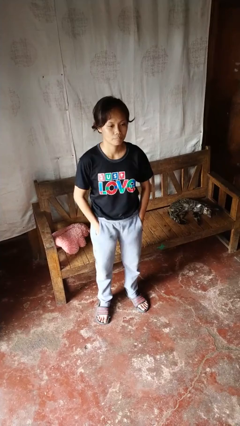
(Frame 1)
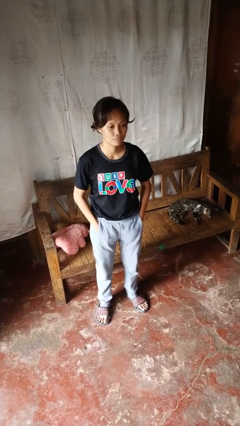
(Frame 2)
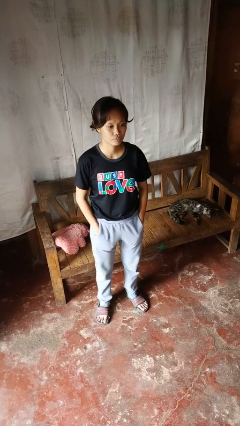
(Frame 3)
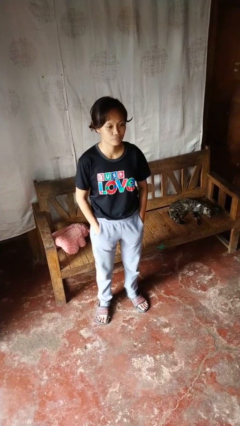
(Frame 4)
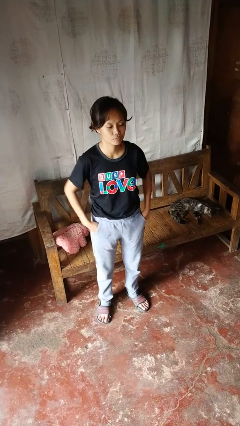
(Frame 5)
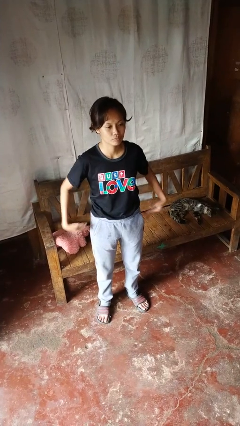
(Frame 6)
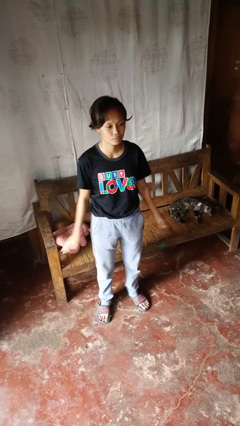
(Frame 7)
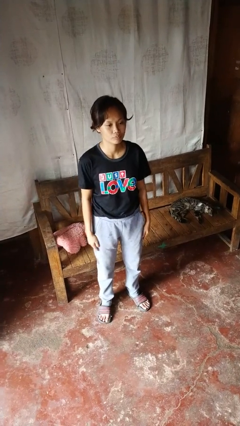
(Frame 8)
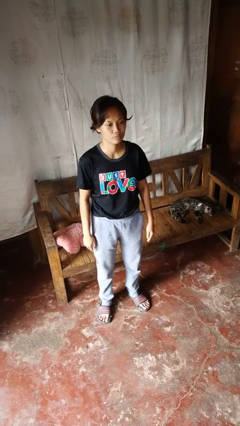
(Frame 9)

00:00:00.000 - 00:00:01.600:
person puts hands in back pockets

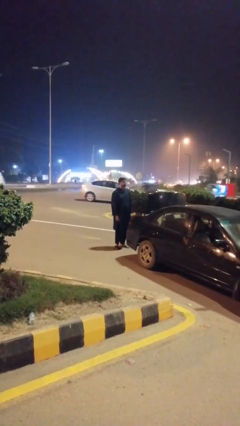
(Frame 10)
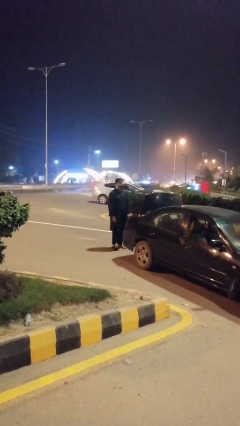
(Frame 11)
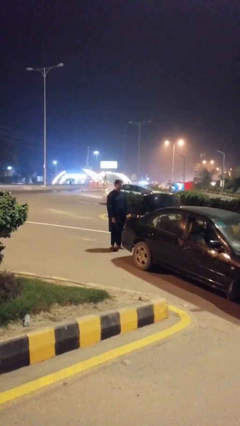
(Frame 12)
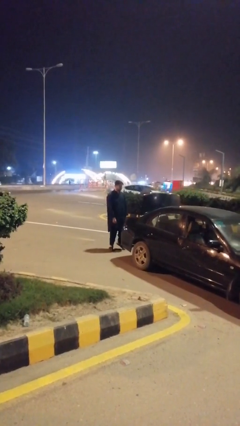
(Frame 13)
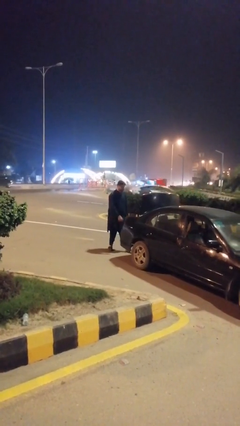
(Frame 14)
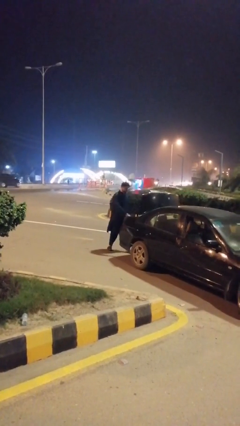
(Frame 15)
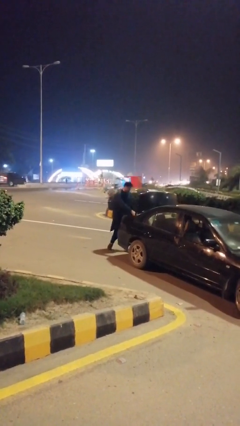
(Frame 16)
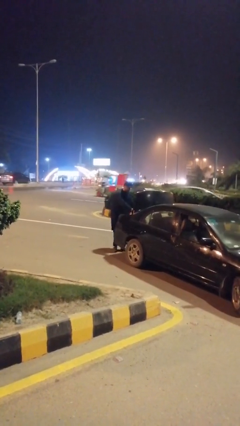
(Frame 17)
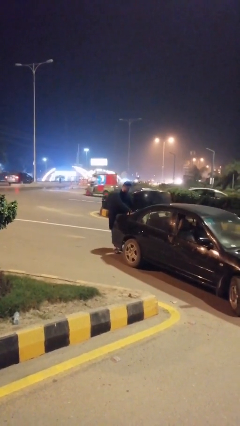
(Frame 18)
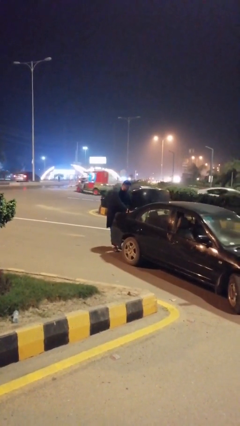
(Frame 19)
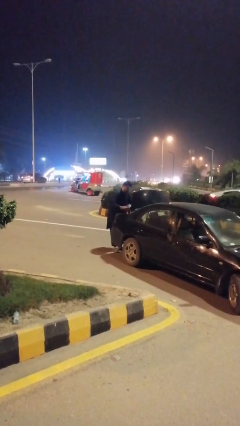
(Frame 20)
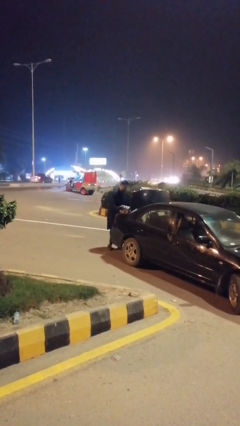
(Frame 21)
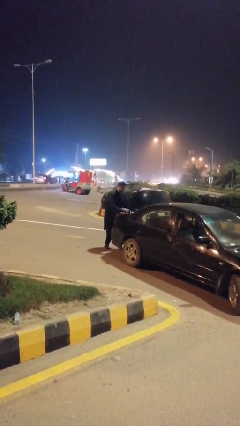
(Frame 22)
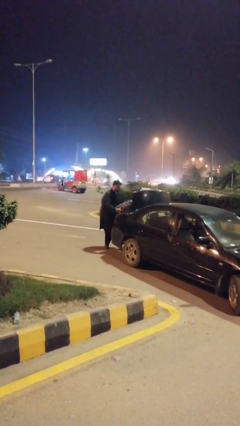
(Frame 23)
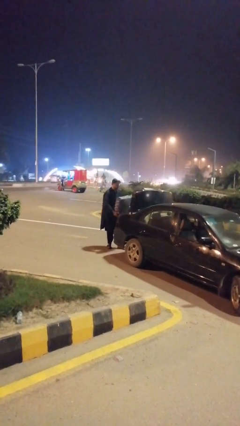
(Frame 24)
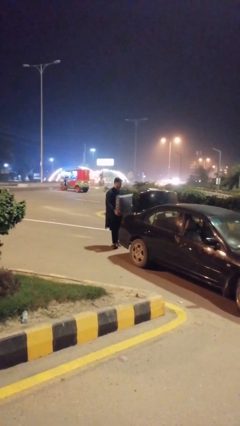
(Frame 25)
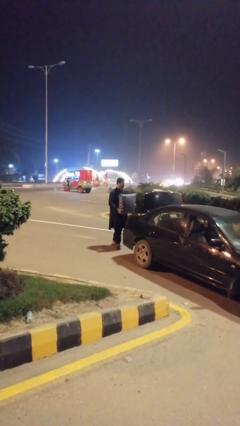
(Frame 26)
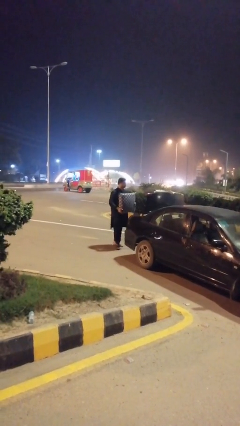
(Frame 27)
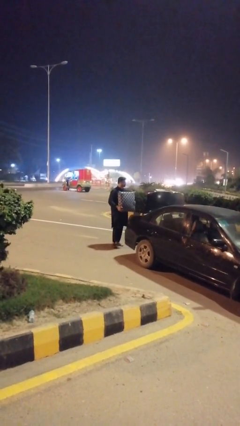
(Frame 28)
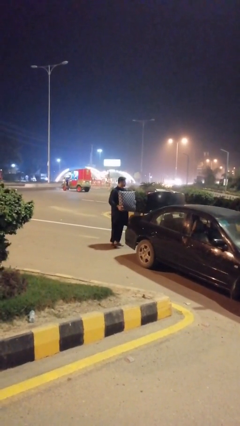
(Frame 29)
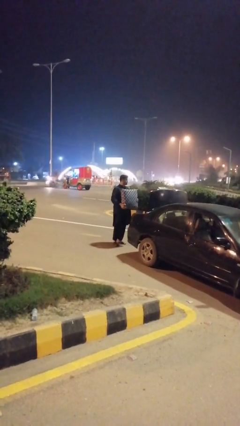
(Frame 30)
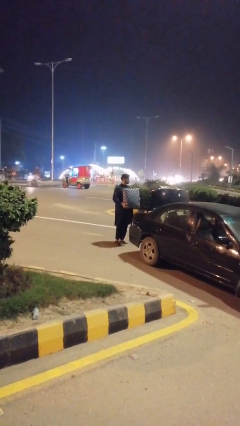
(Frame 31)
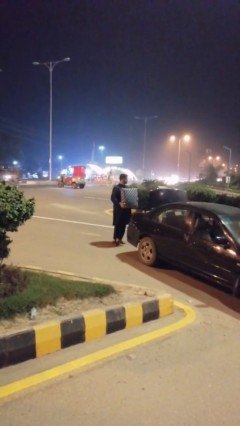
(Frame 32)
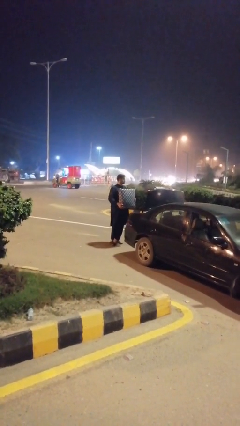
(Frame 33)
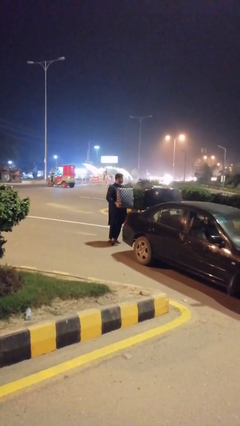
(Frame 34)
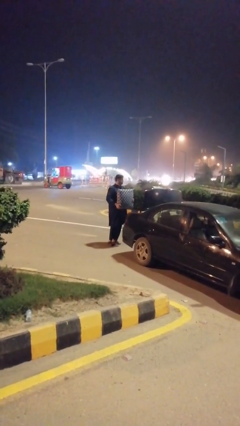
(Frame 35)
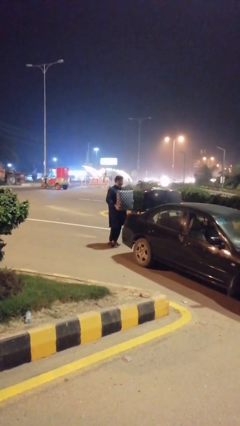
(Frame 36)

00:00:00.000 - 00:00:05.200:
person unloads car

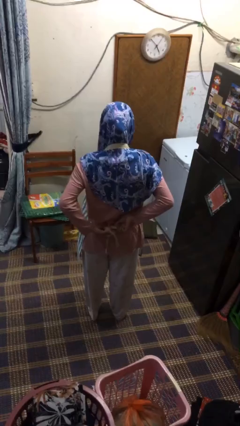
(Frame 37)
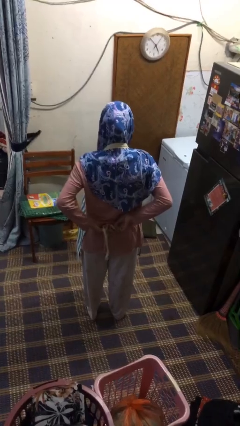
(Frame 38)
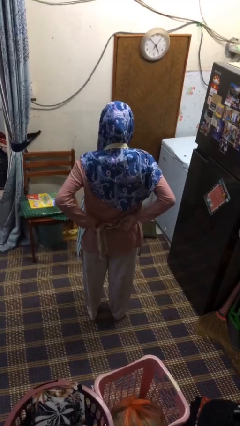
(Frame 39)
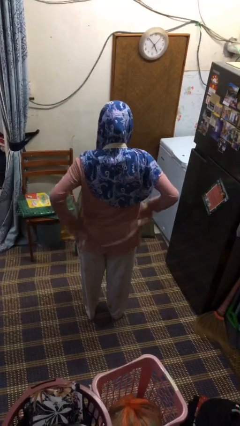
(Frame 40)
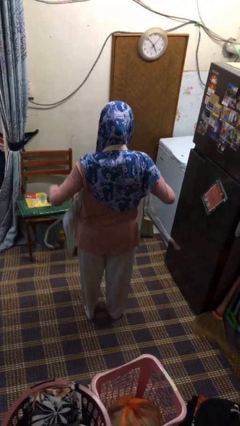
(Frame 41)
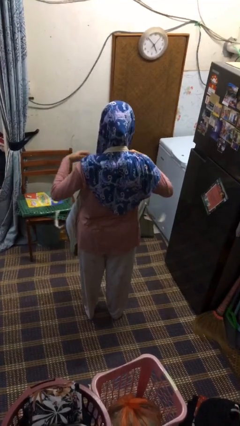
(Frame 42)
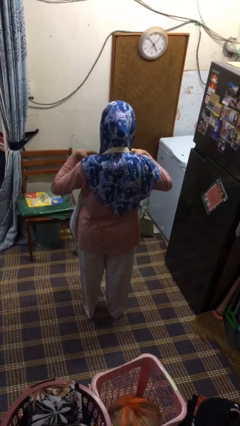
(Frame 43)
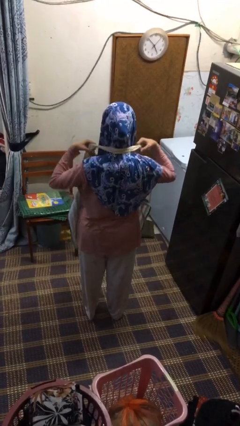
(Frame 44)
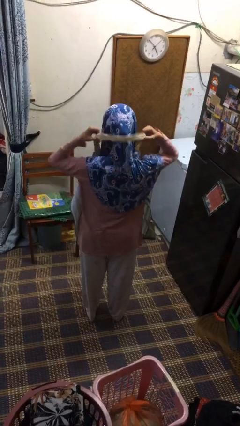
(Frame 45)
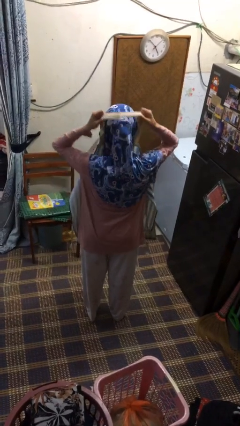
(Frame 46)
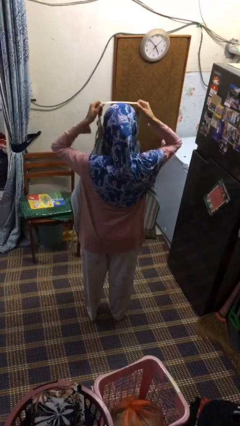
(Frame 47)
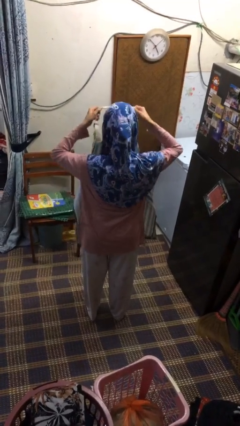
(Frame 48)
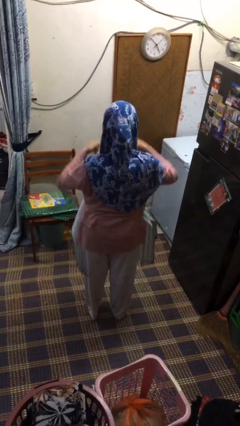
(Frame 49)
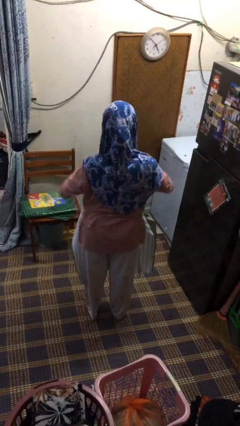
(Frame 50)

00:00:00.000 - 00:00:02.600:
person takes off apron

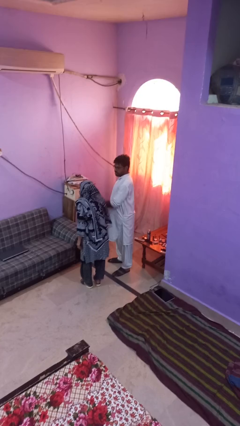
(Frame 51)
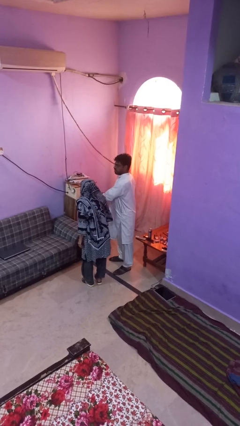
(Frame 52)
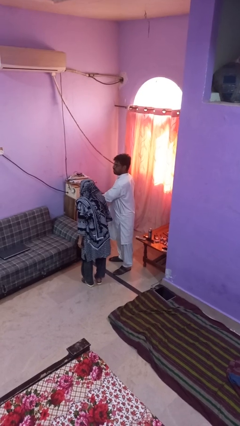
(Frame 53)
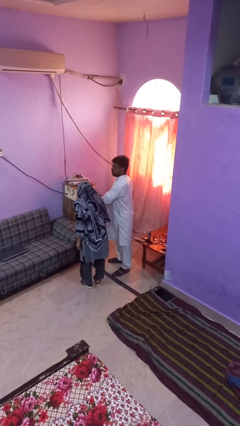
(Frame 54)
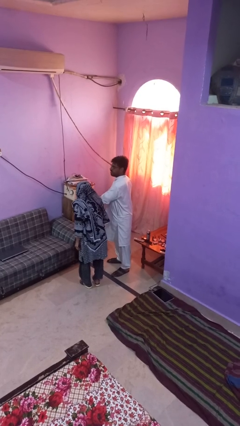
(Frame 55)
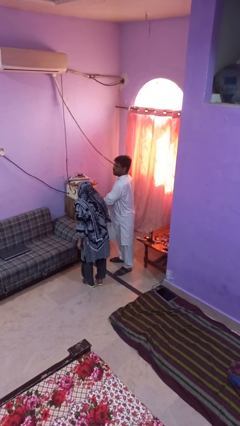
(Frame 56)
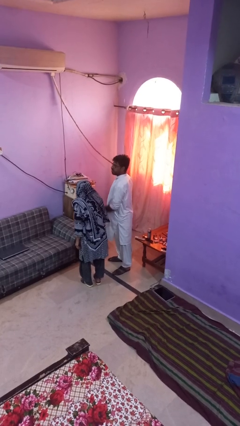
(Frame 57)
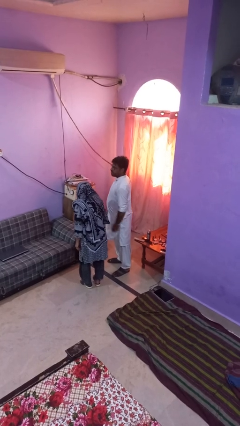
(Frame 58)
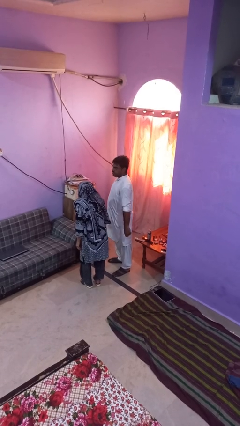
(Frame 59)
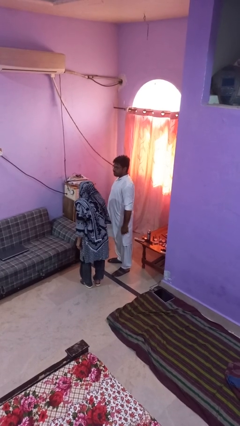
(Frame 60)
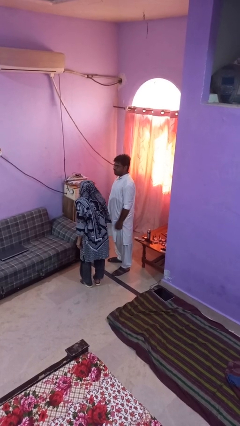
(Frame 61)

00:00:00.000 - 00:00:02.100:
person nudges person with elbow

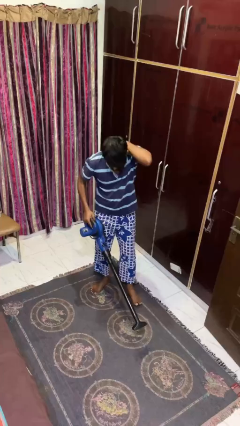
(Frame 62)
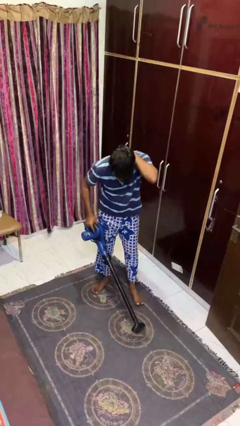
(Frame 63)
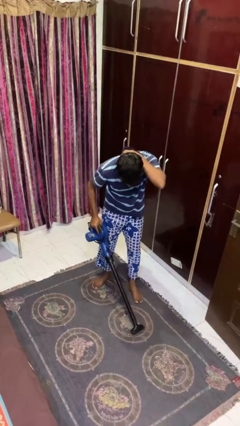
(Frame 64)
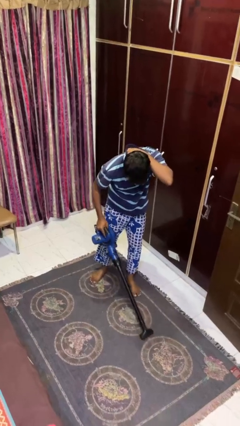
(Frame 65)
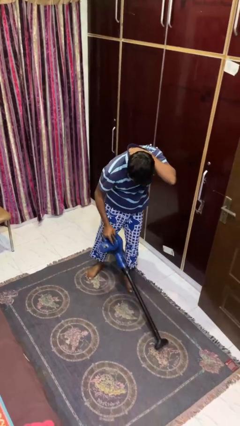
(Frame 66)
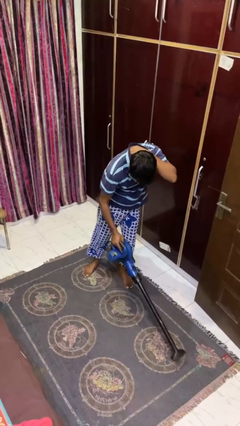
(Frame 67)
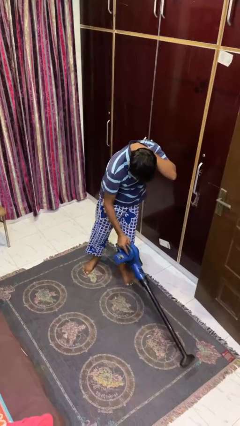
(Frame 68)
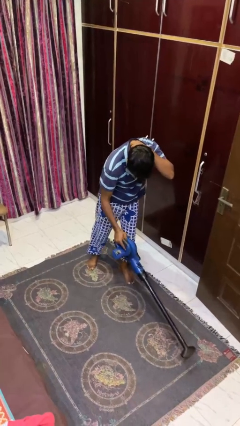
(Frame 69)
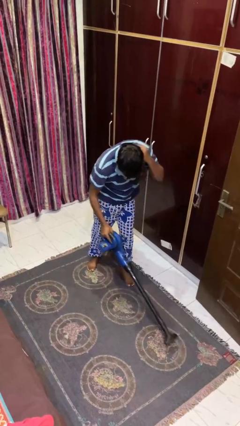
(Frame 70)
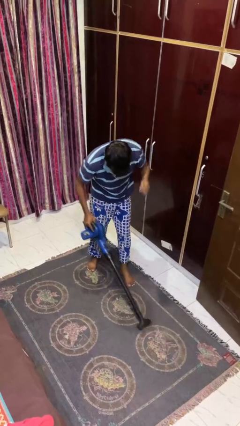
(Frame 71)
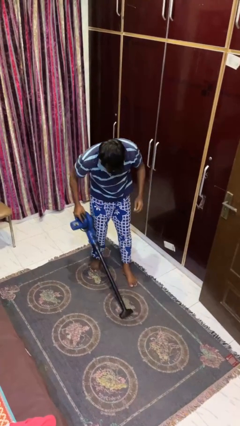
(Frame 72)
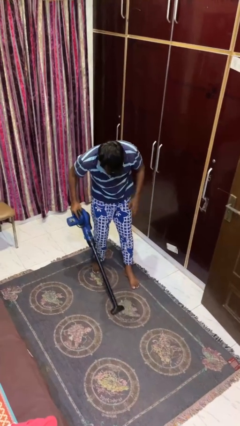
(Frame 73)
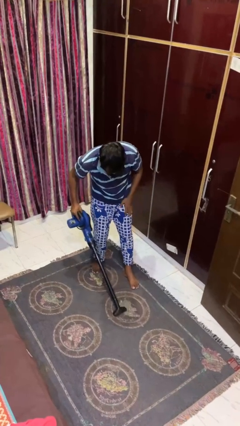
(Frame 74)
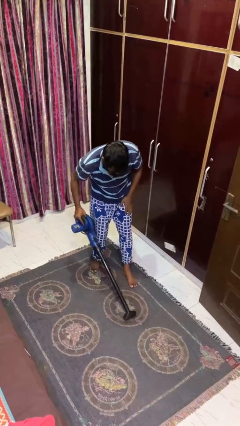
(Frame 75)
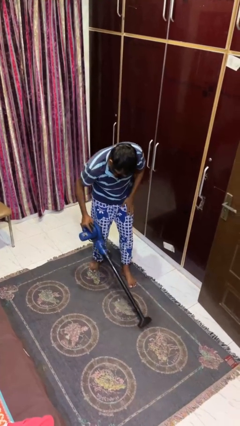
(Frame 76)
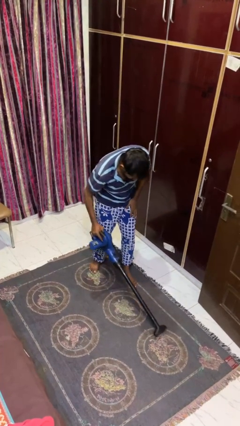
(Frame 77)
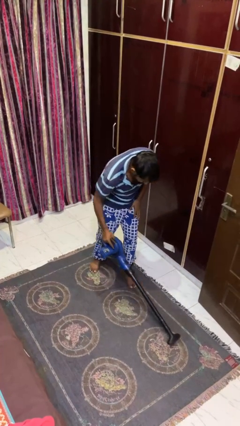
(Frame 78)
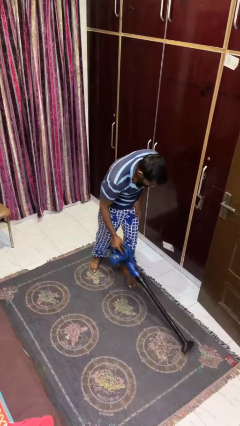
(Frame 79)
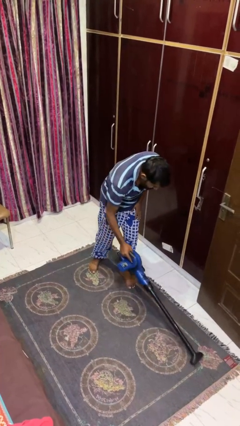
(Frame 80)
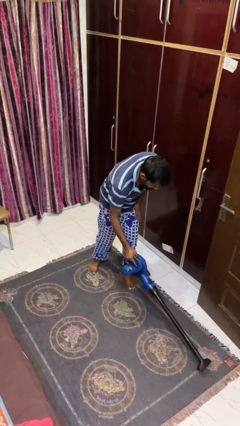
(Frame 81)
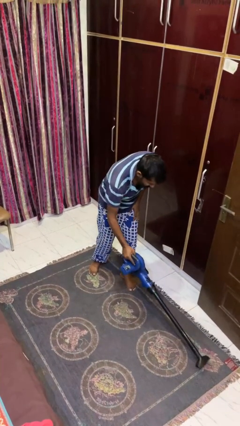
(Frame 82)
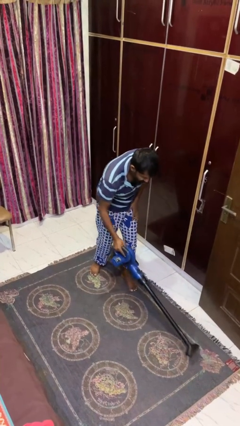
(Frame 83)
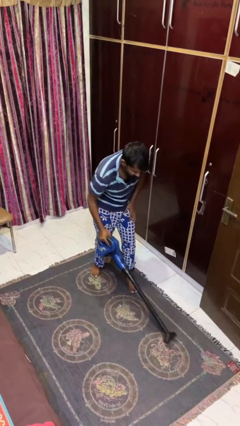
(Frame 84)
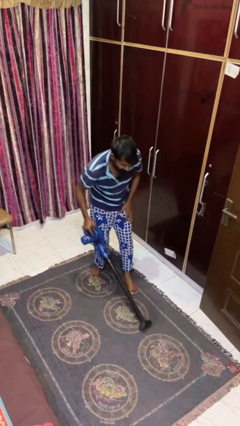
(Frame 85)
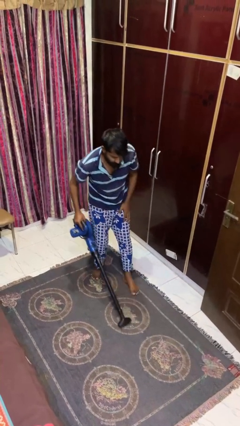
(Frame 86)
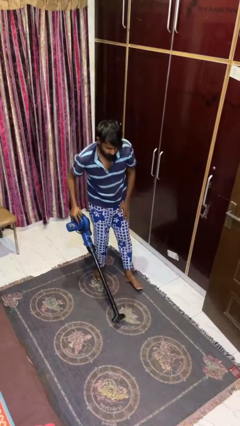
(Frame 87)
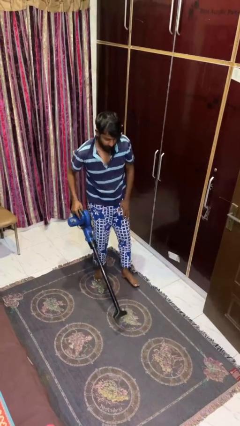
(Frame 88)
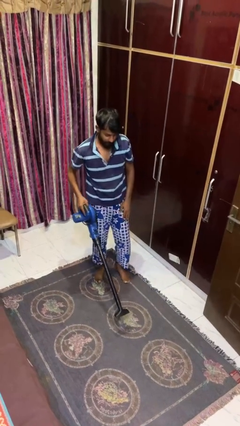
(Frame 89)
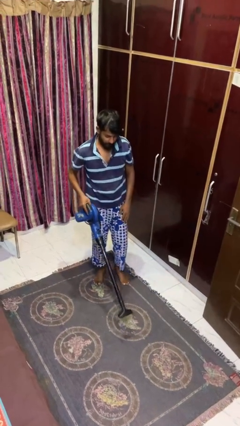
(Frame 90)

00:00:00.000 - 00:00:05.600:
person vacuums carpet

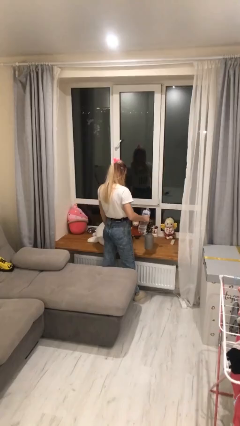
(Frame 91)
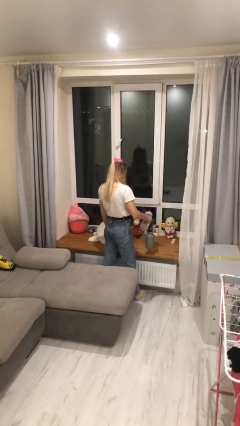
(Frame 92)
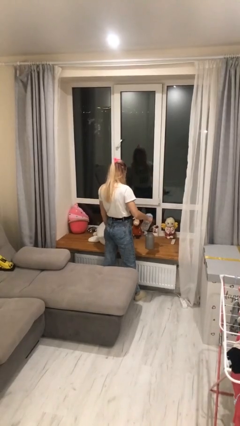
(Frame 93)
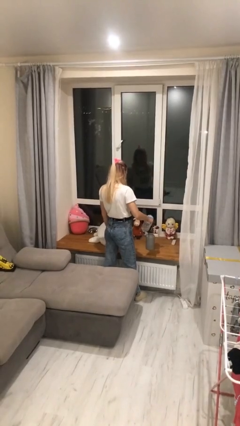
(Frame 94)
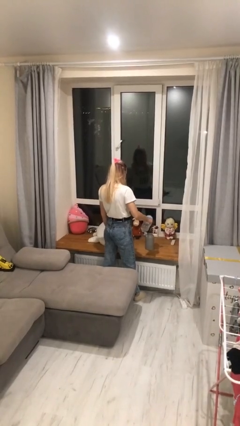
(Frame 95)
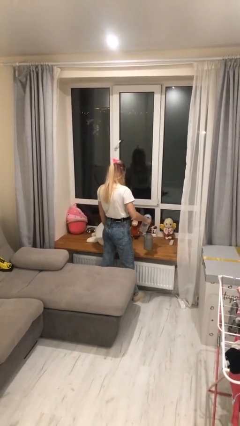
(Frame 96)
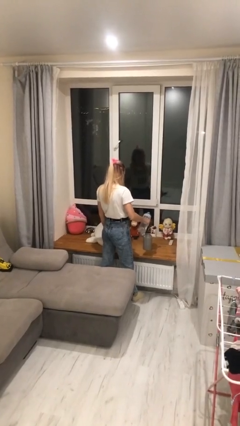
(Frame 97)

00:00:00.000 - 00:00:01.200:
person waters houseplant
